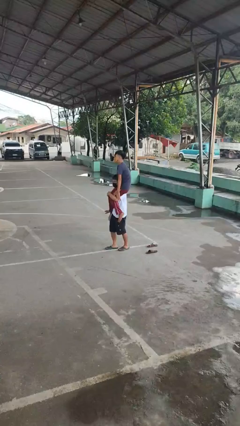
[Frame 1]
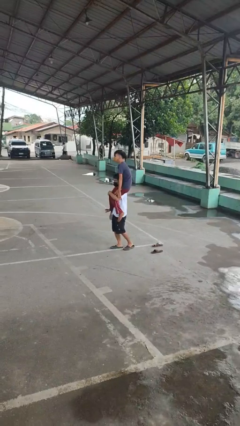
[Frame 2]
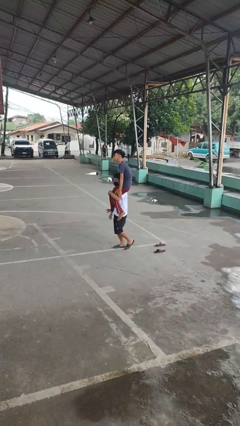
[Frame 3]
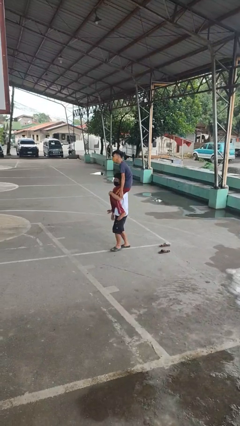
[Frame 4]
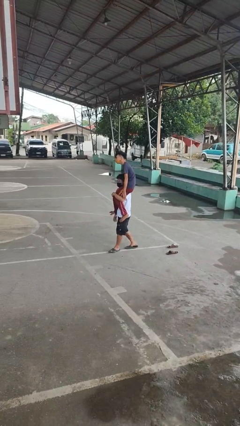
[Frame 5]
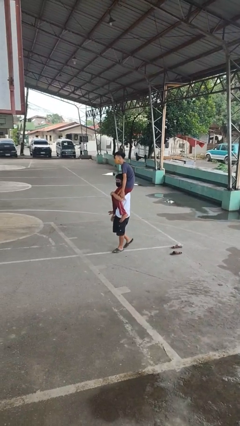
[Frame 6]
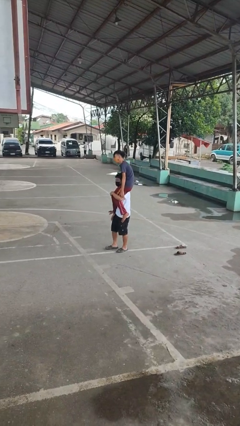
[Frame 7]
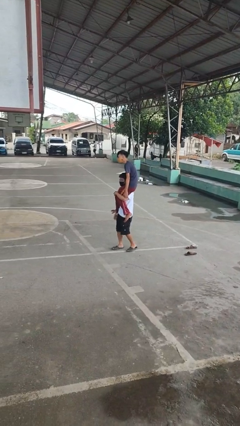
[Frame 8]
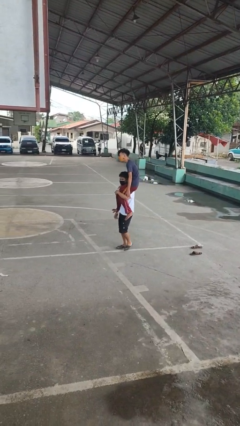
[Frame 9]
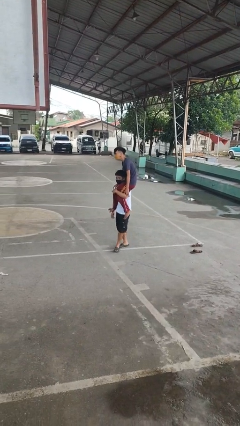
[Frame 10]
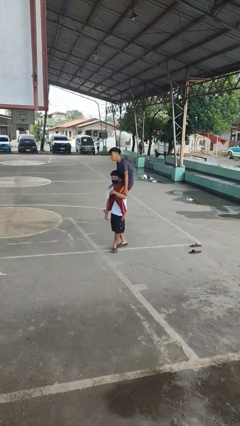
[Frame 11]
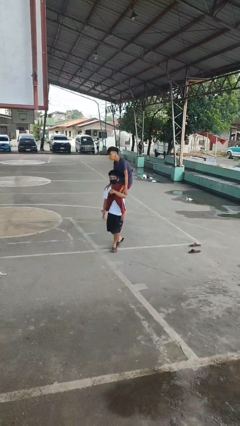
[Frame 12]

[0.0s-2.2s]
person carries person on shoulders

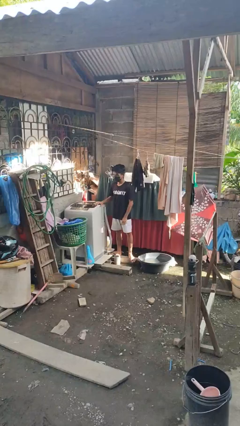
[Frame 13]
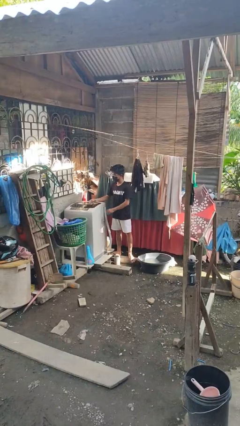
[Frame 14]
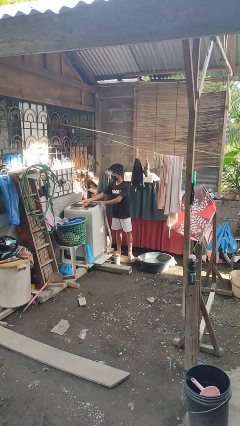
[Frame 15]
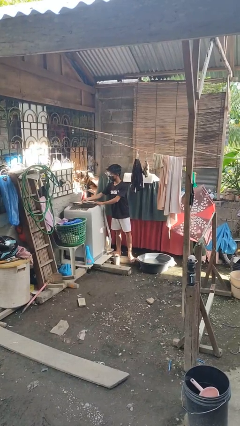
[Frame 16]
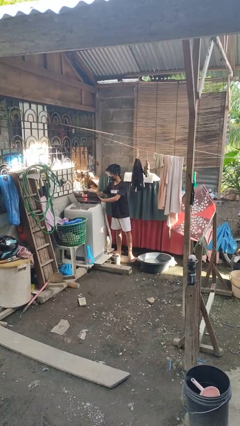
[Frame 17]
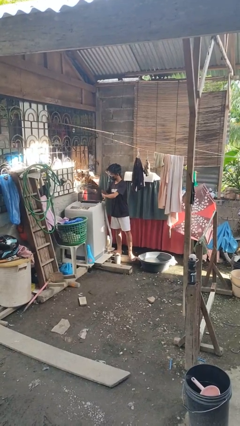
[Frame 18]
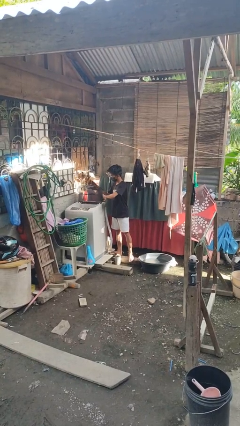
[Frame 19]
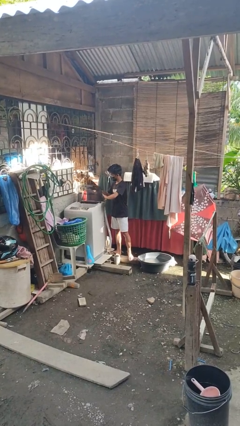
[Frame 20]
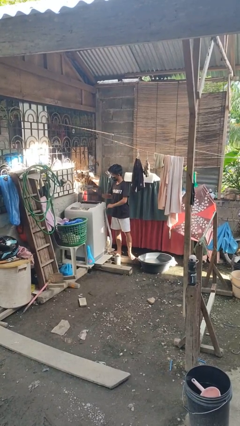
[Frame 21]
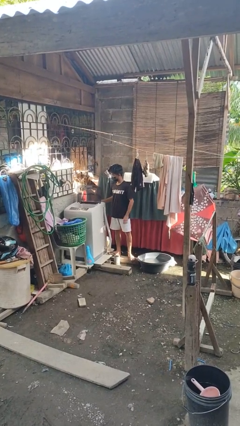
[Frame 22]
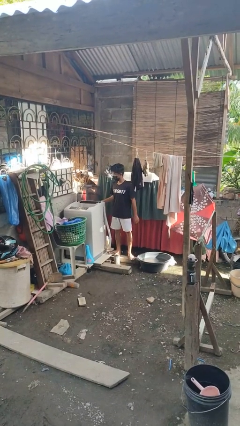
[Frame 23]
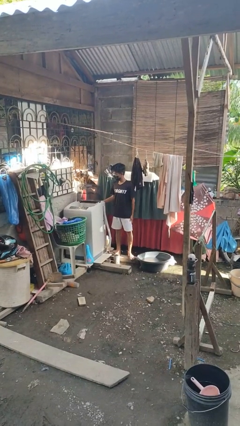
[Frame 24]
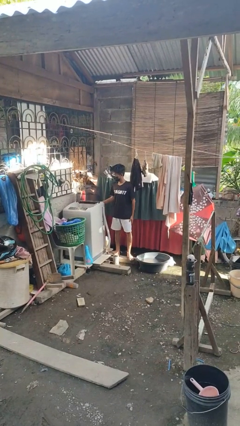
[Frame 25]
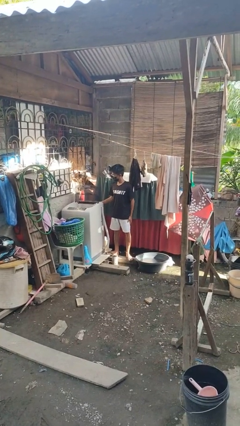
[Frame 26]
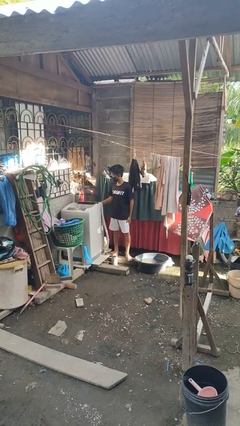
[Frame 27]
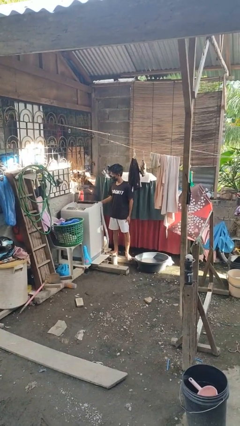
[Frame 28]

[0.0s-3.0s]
person opens clothes washer

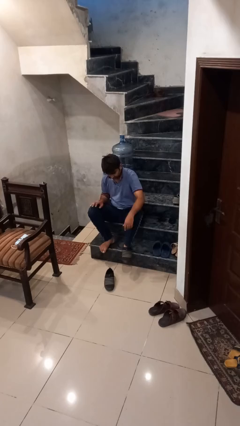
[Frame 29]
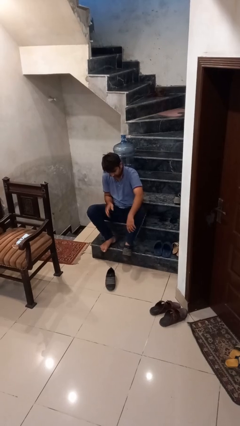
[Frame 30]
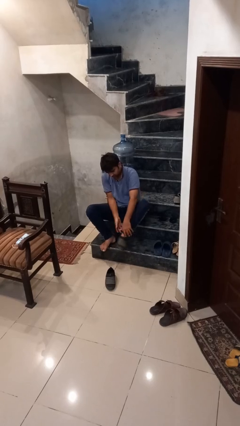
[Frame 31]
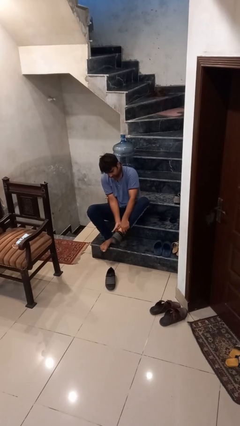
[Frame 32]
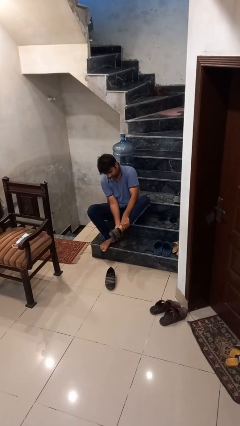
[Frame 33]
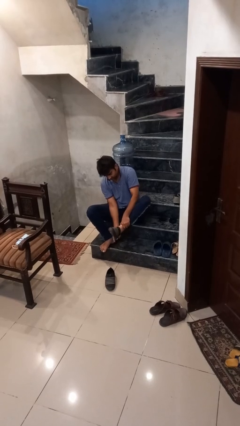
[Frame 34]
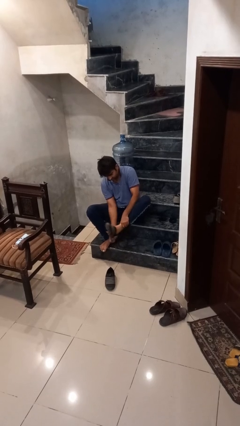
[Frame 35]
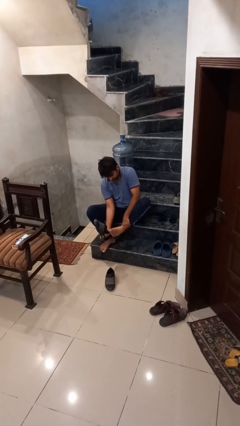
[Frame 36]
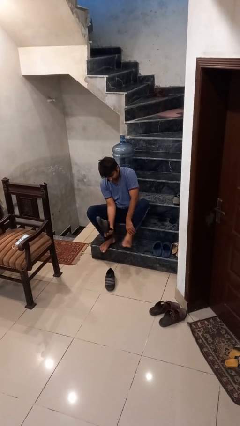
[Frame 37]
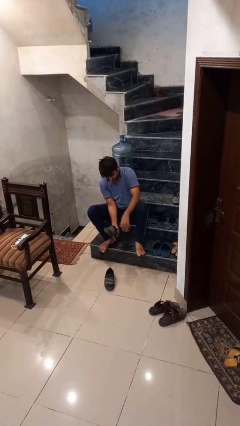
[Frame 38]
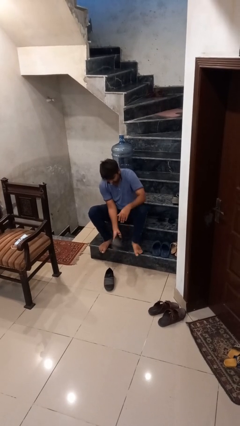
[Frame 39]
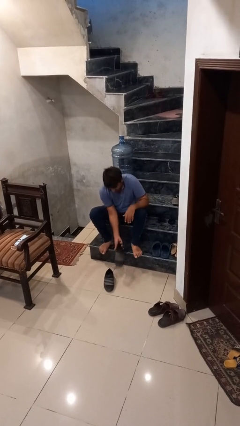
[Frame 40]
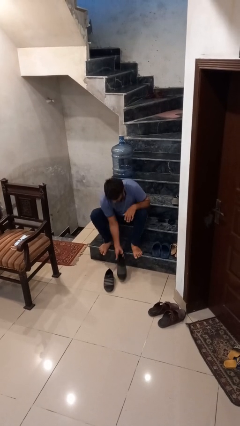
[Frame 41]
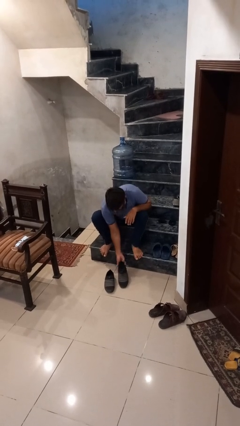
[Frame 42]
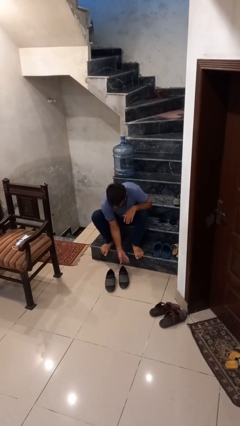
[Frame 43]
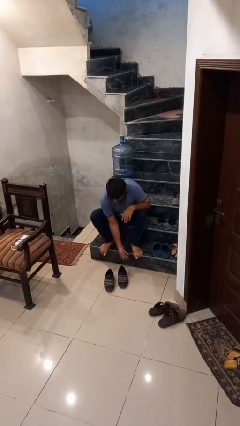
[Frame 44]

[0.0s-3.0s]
person takes off shoes

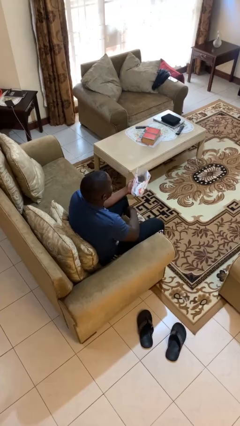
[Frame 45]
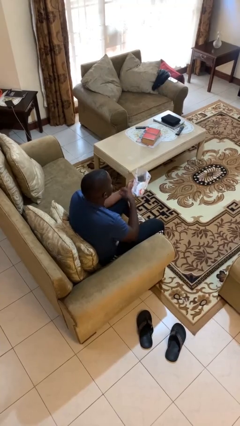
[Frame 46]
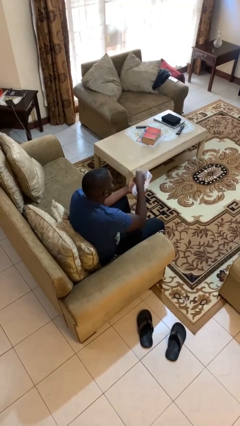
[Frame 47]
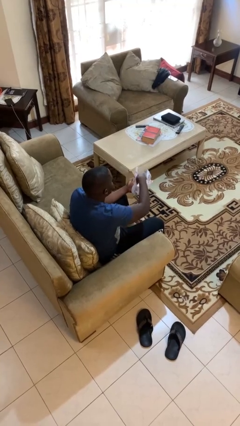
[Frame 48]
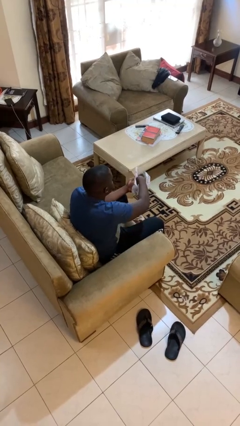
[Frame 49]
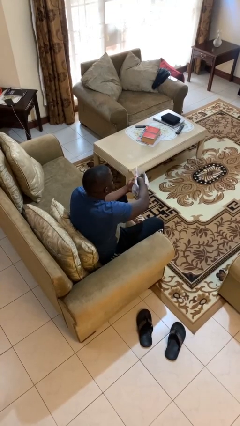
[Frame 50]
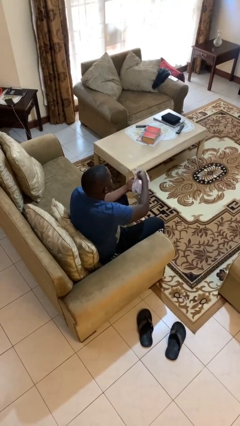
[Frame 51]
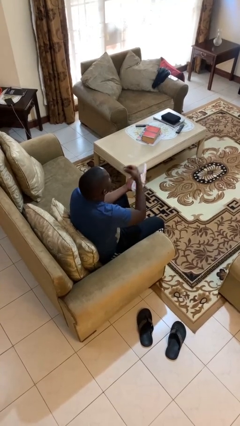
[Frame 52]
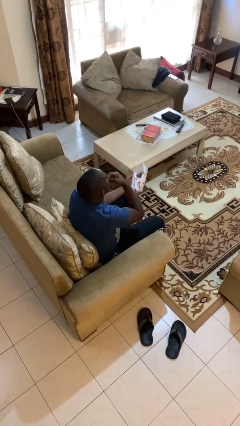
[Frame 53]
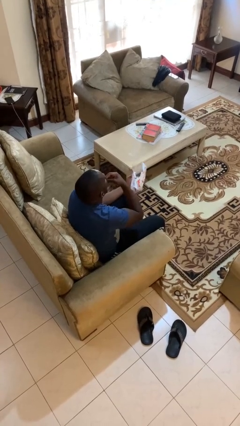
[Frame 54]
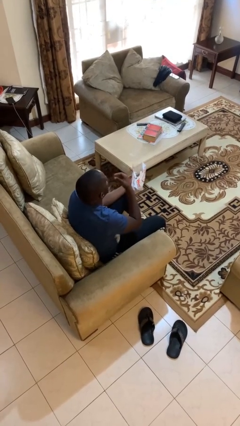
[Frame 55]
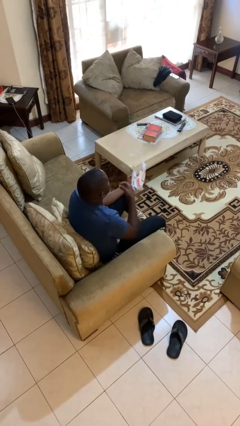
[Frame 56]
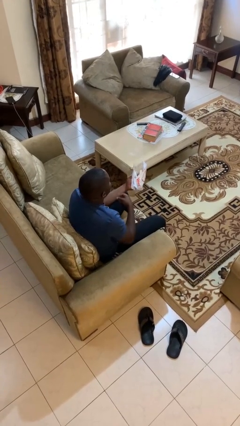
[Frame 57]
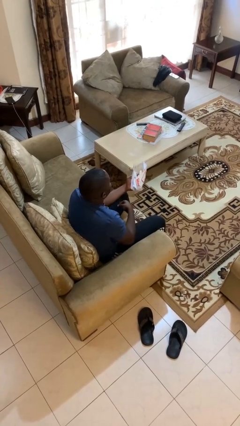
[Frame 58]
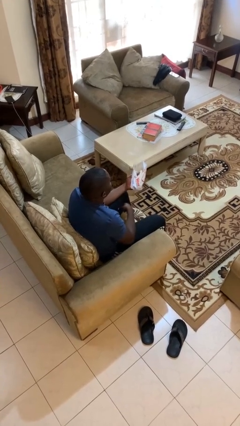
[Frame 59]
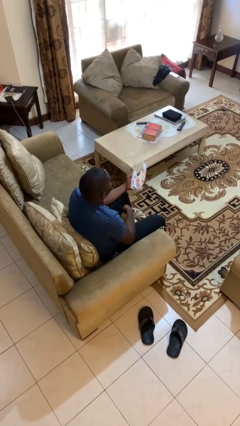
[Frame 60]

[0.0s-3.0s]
person eats snack from bag

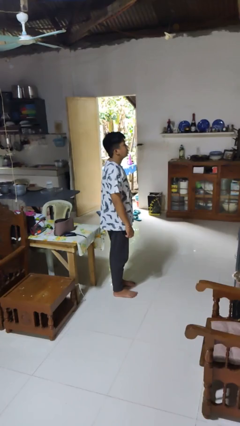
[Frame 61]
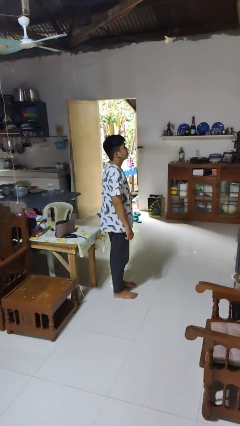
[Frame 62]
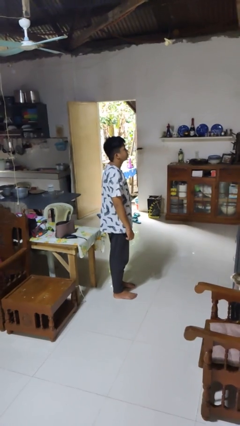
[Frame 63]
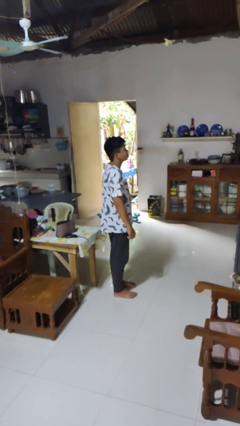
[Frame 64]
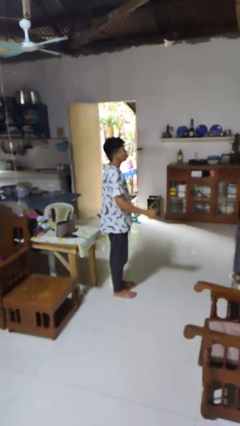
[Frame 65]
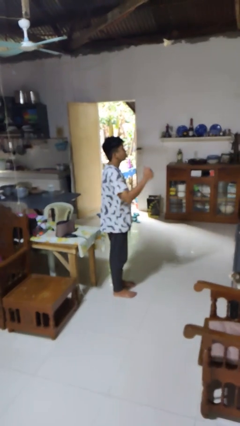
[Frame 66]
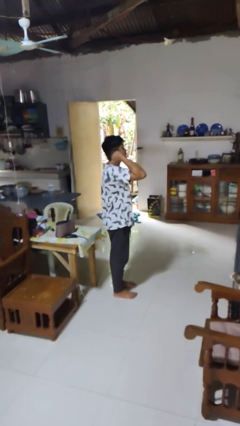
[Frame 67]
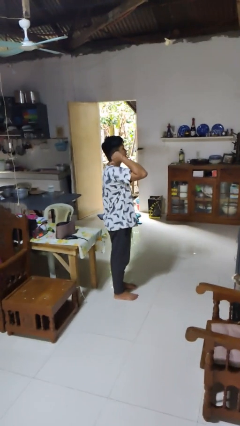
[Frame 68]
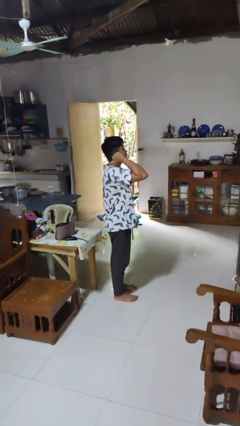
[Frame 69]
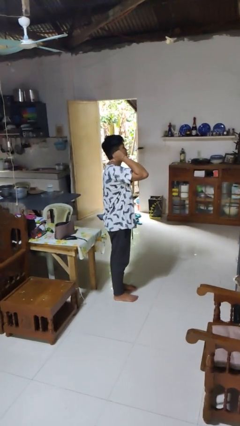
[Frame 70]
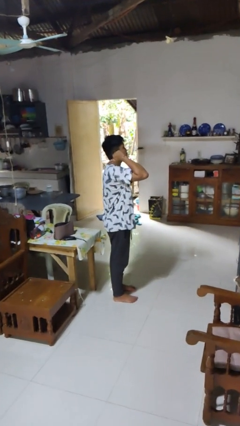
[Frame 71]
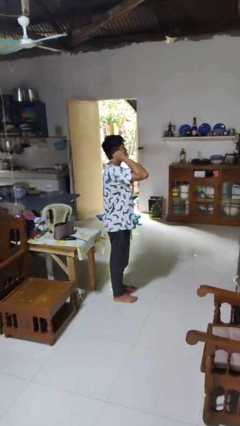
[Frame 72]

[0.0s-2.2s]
person gestures behind me

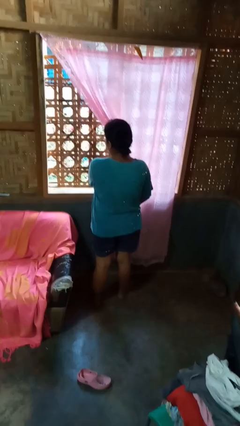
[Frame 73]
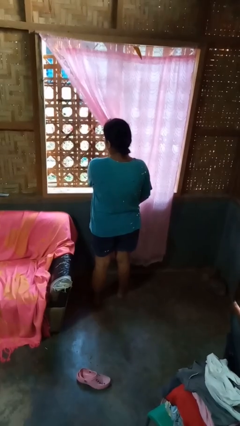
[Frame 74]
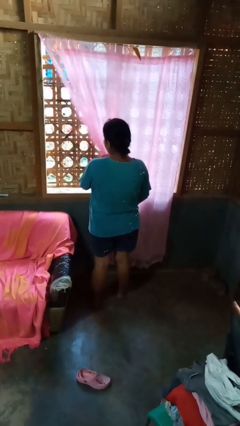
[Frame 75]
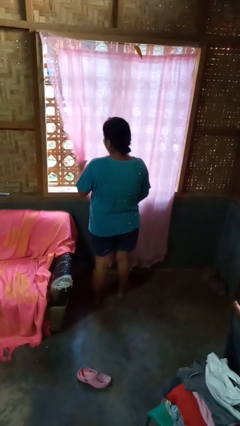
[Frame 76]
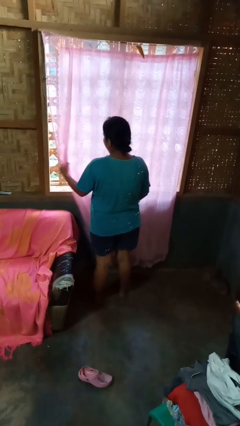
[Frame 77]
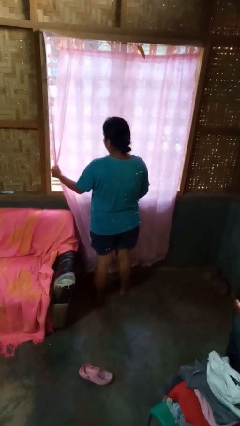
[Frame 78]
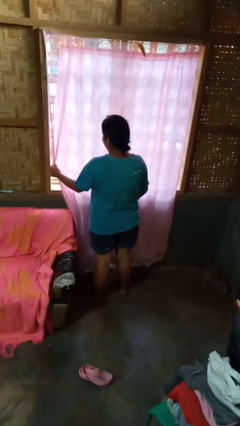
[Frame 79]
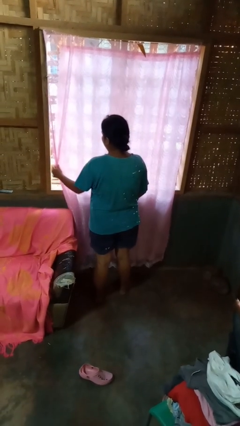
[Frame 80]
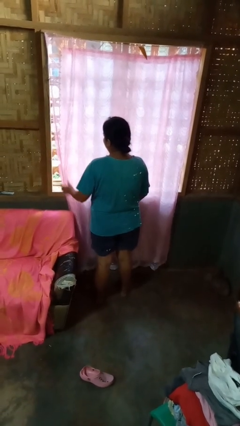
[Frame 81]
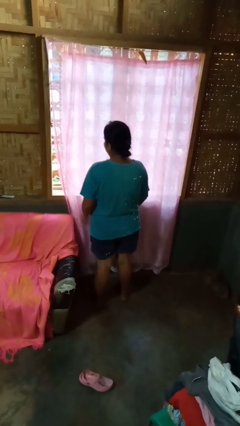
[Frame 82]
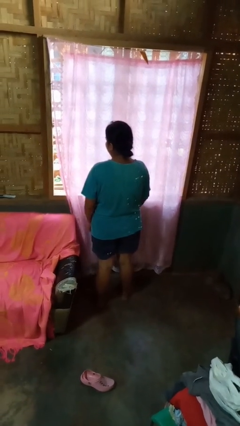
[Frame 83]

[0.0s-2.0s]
person closes curtains

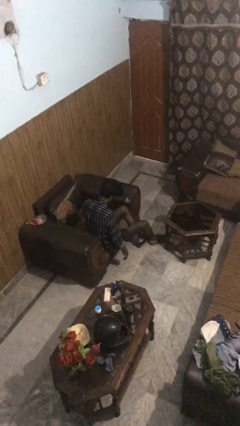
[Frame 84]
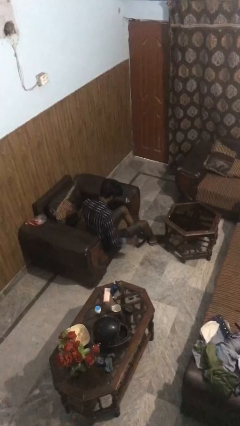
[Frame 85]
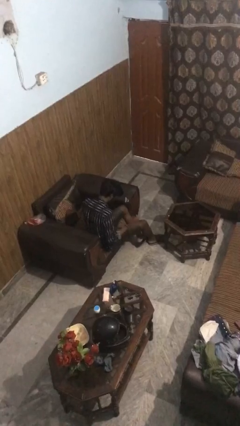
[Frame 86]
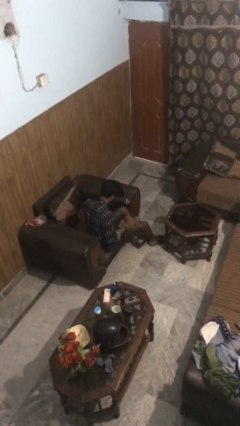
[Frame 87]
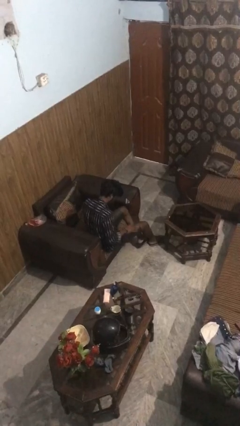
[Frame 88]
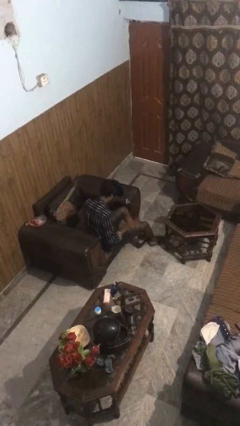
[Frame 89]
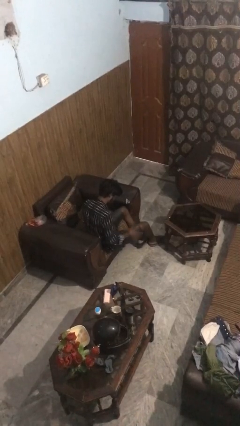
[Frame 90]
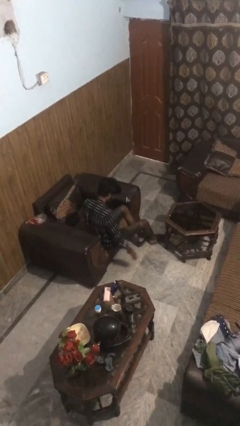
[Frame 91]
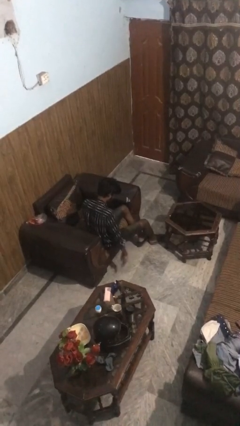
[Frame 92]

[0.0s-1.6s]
person slaps hands on thighs
